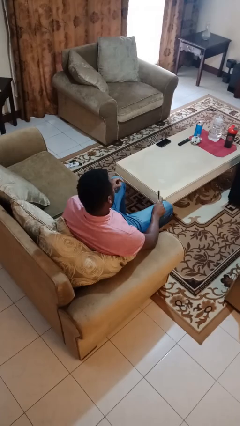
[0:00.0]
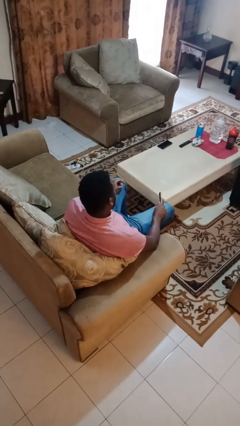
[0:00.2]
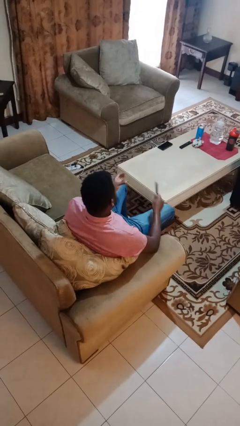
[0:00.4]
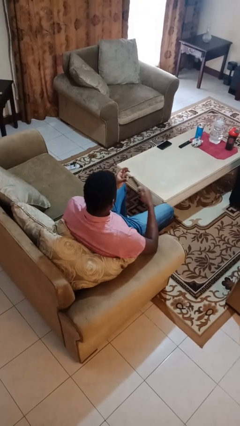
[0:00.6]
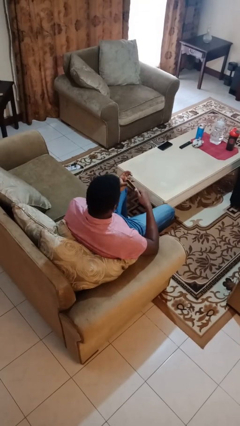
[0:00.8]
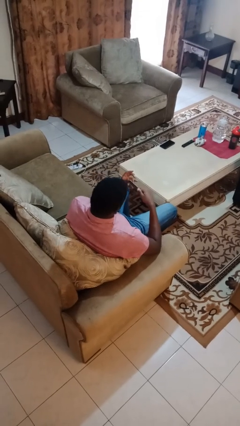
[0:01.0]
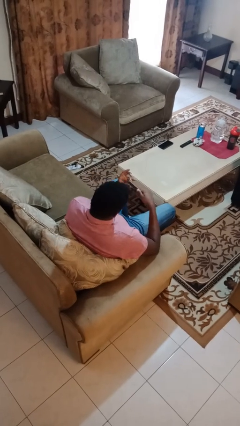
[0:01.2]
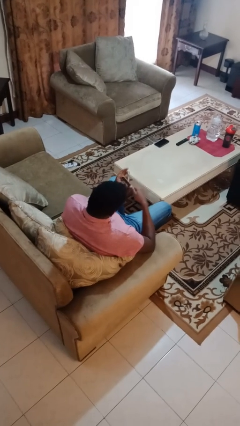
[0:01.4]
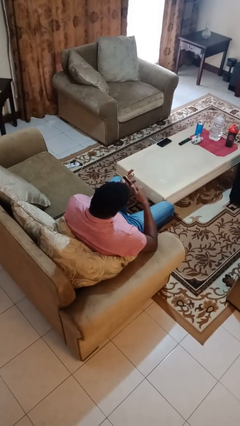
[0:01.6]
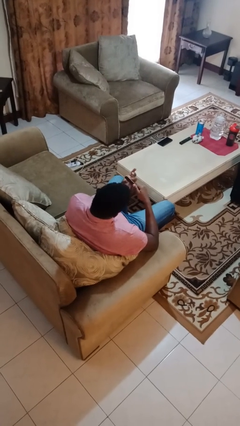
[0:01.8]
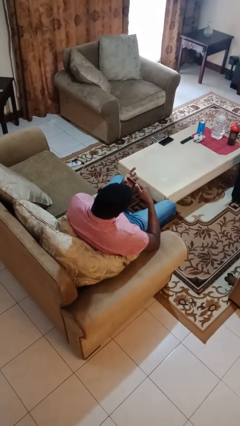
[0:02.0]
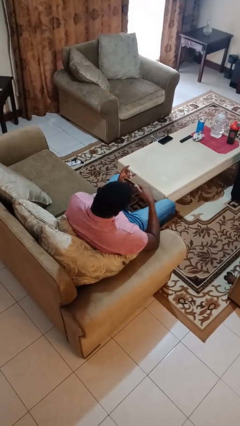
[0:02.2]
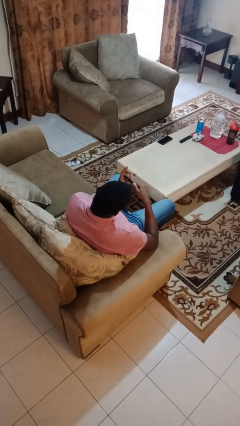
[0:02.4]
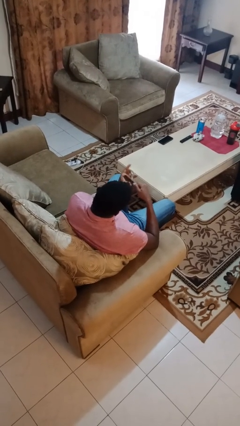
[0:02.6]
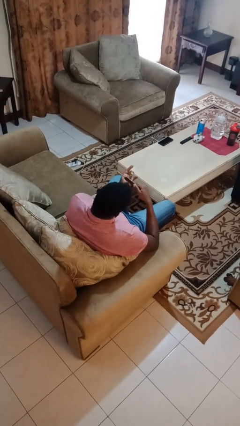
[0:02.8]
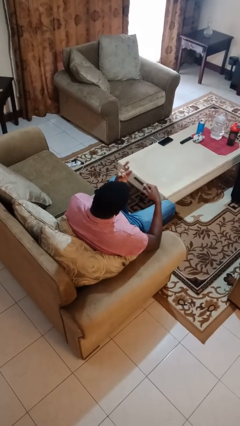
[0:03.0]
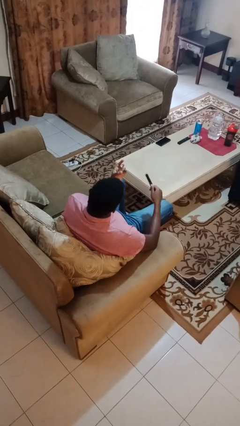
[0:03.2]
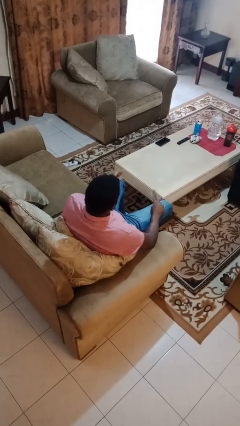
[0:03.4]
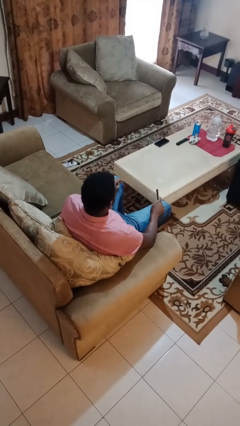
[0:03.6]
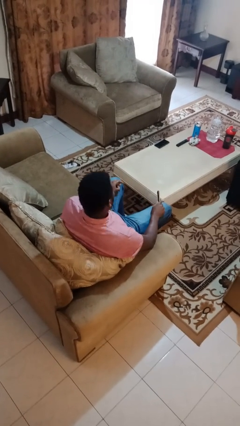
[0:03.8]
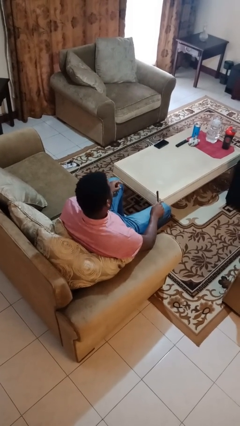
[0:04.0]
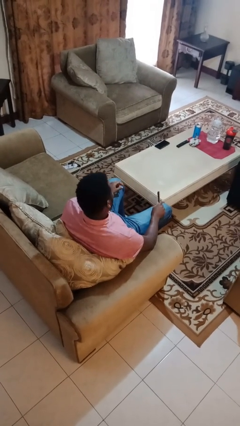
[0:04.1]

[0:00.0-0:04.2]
person files fingernails

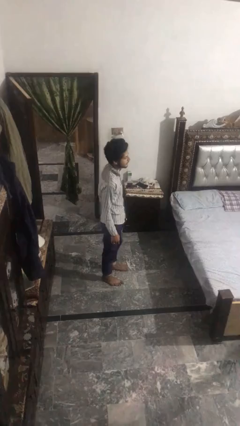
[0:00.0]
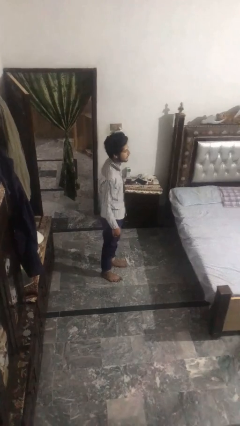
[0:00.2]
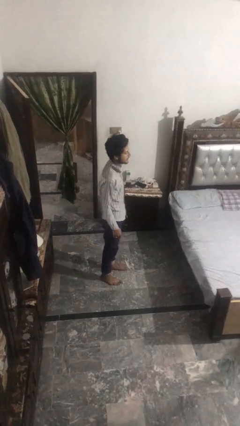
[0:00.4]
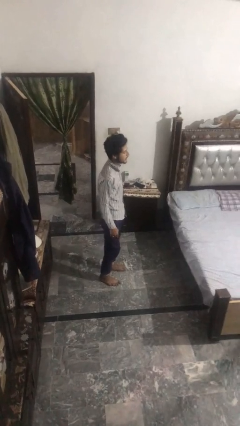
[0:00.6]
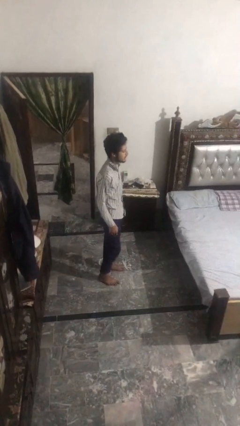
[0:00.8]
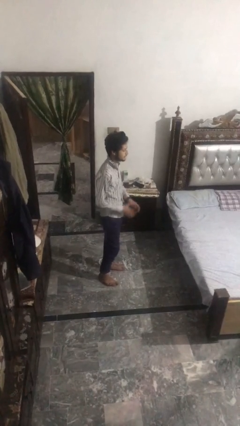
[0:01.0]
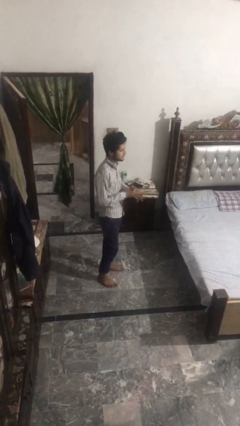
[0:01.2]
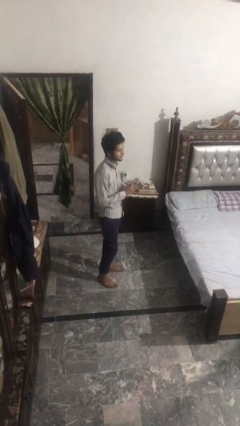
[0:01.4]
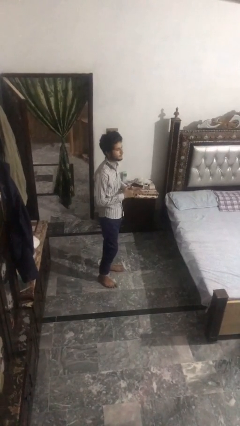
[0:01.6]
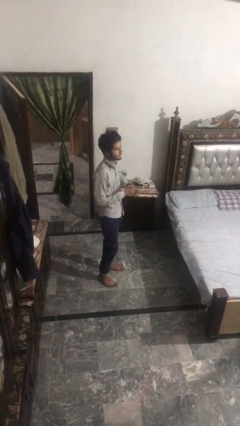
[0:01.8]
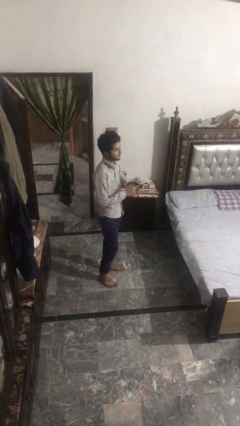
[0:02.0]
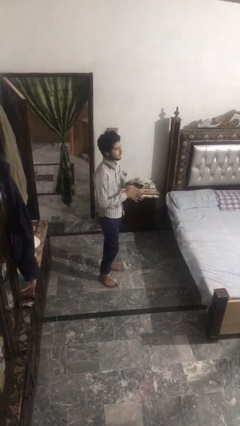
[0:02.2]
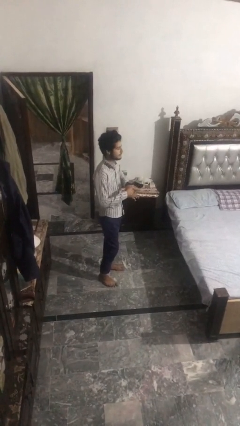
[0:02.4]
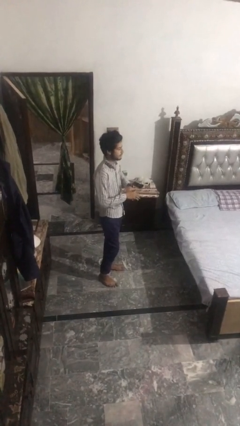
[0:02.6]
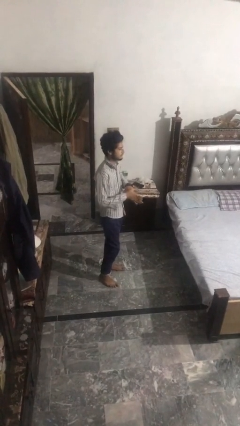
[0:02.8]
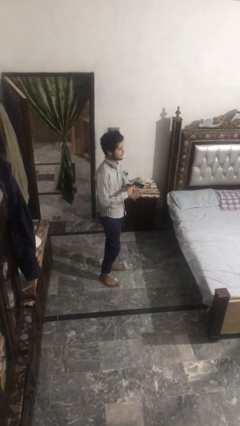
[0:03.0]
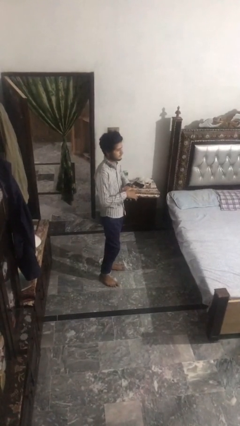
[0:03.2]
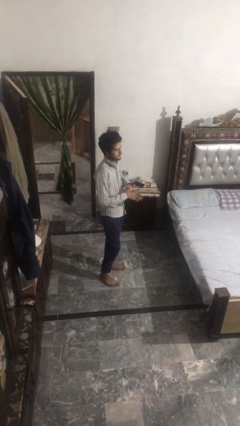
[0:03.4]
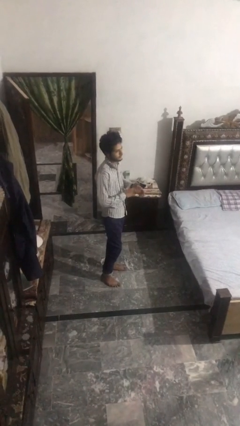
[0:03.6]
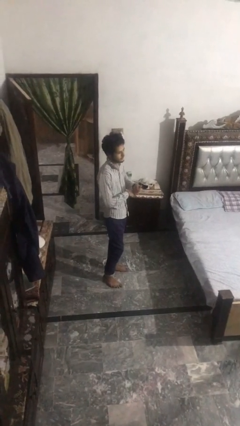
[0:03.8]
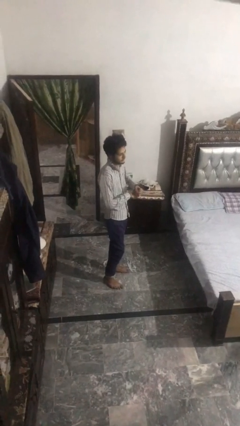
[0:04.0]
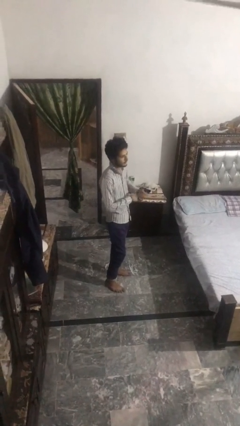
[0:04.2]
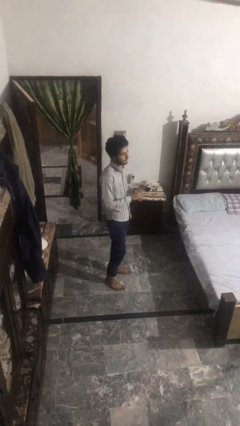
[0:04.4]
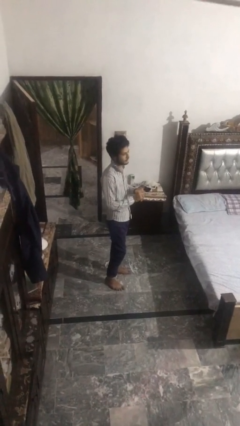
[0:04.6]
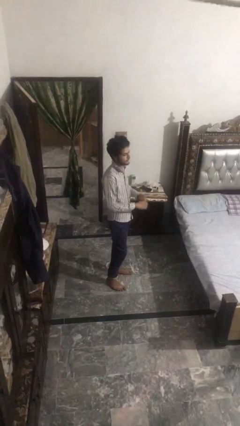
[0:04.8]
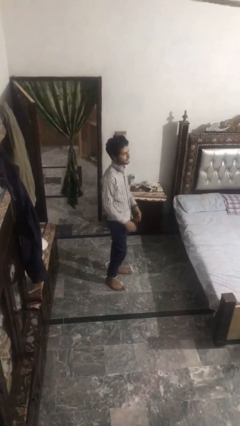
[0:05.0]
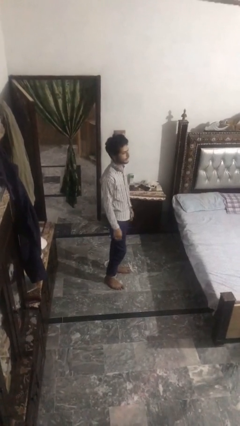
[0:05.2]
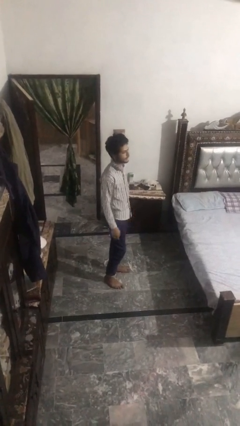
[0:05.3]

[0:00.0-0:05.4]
person cracks knuckles

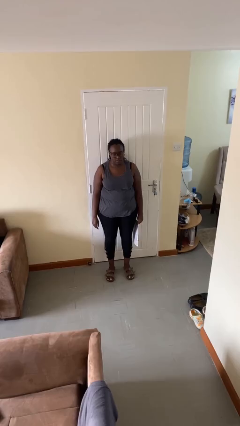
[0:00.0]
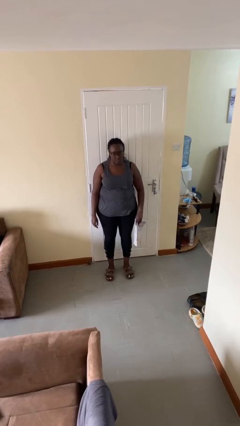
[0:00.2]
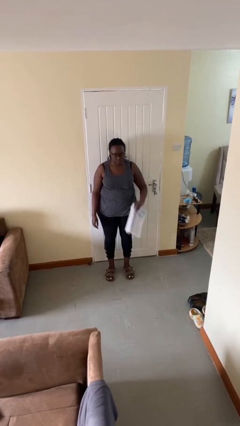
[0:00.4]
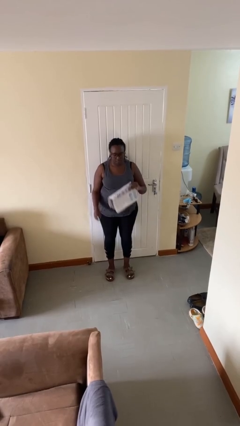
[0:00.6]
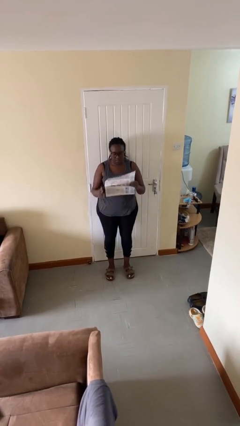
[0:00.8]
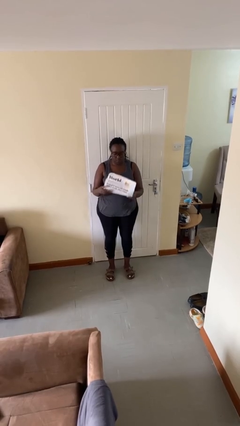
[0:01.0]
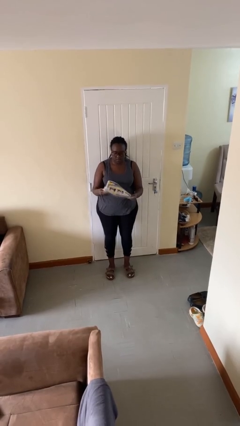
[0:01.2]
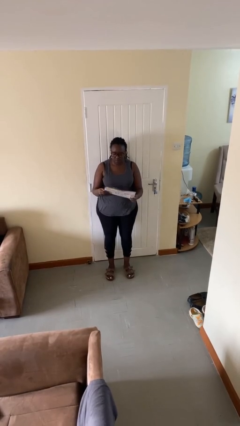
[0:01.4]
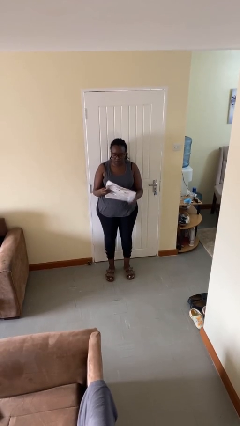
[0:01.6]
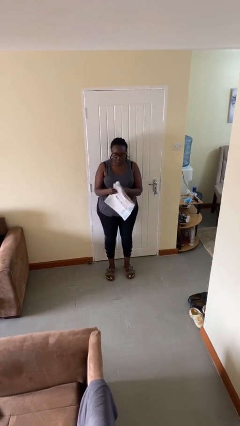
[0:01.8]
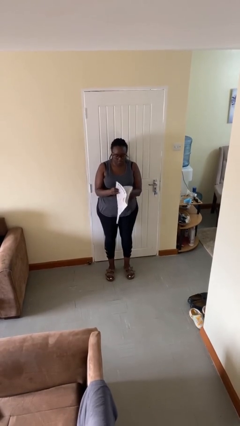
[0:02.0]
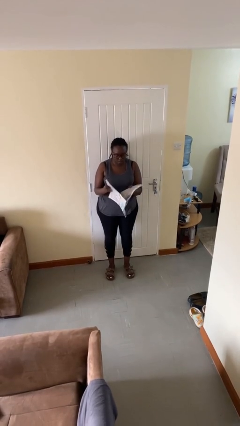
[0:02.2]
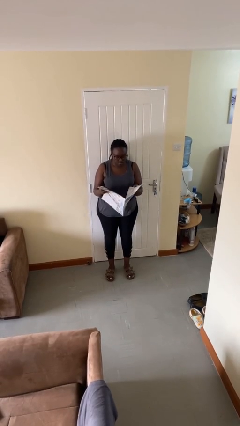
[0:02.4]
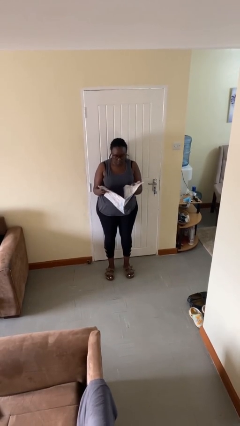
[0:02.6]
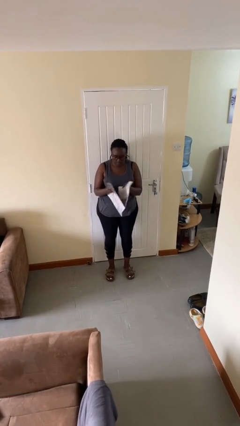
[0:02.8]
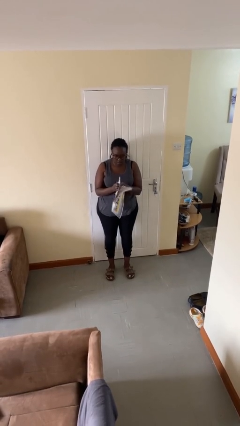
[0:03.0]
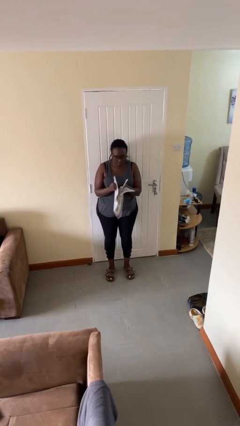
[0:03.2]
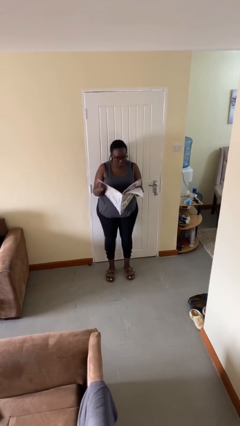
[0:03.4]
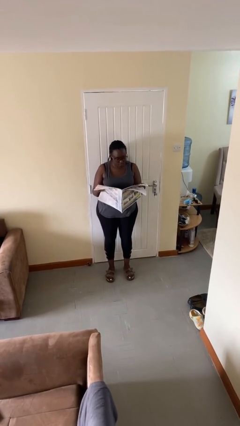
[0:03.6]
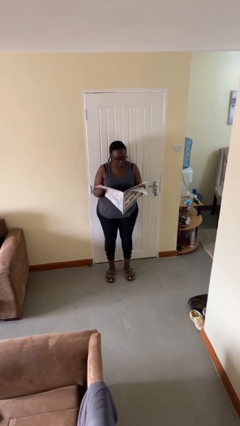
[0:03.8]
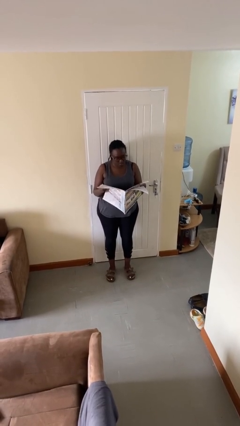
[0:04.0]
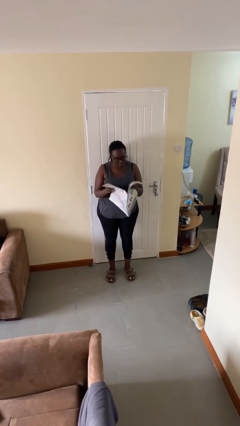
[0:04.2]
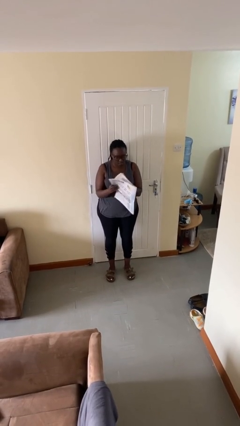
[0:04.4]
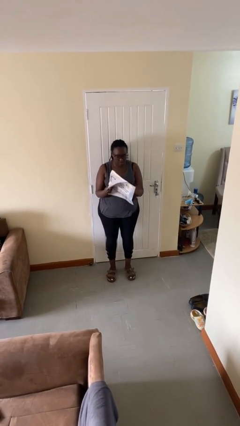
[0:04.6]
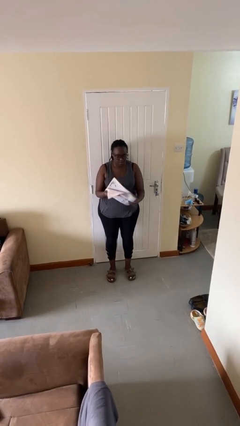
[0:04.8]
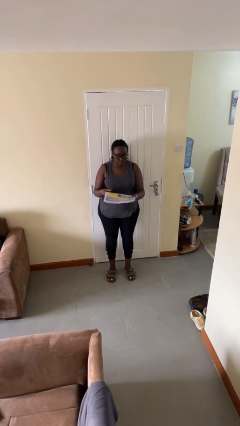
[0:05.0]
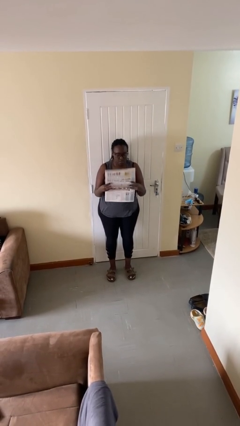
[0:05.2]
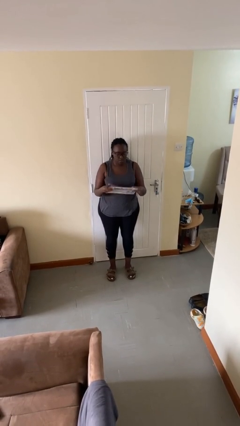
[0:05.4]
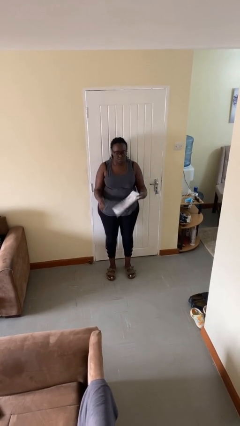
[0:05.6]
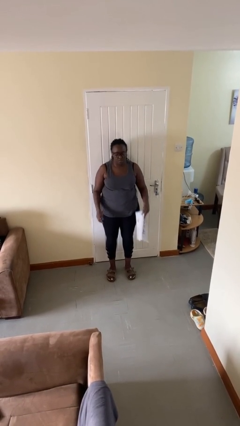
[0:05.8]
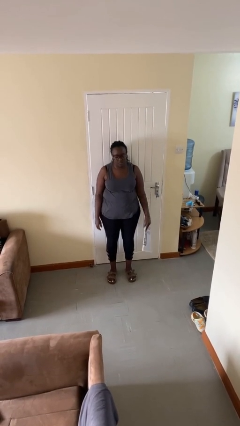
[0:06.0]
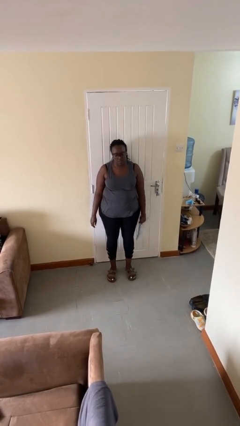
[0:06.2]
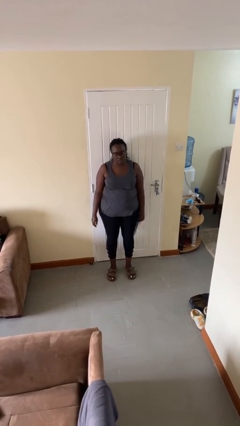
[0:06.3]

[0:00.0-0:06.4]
person reads newspaper

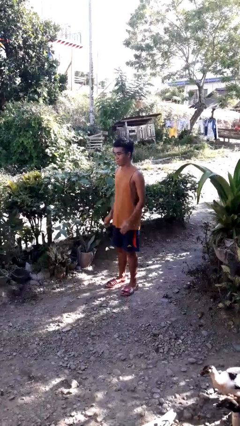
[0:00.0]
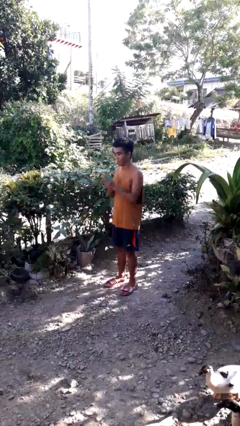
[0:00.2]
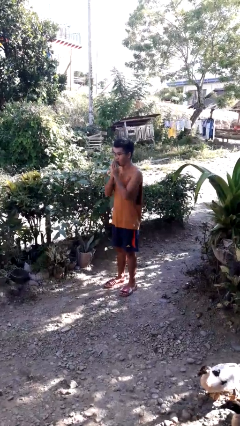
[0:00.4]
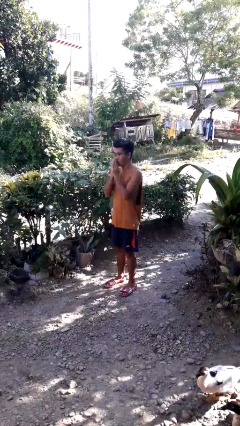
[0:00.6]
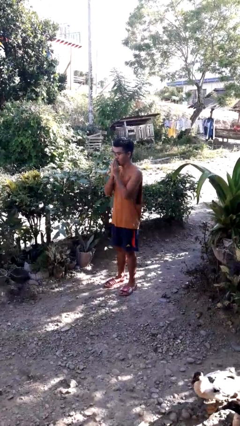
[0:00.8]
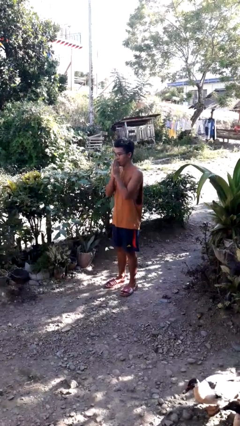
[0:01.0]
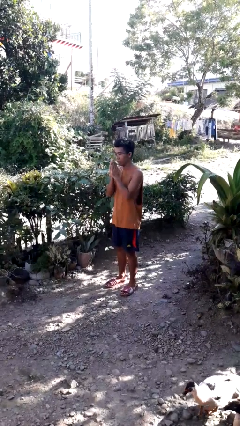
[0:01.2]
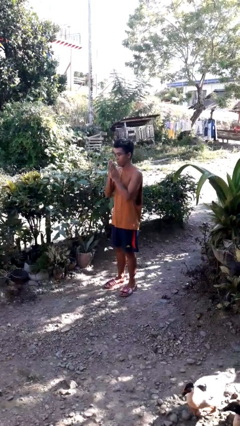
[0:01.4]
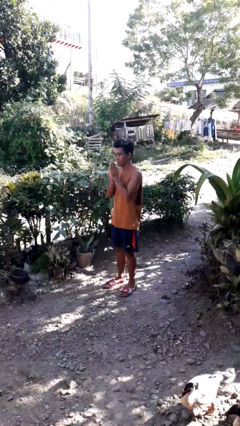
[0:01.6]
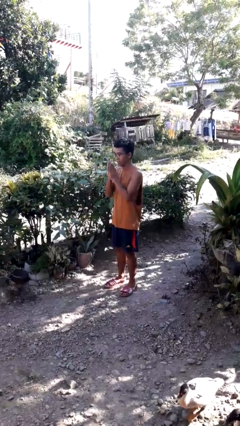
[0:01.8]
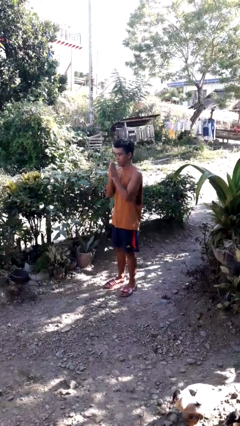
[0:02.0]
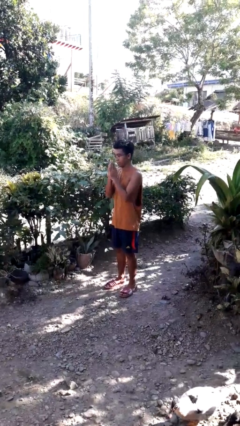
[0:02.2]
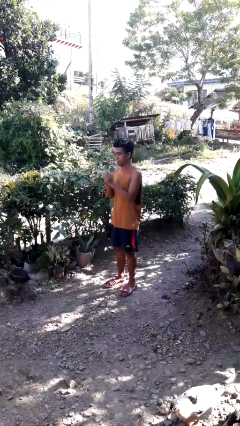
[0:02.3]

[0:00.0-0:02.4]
person blows into hands
